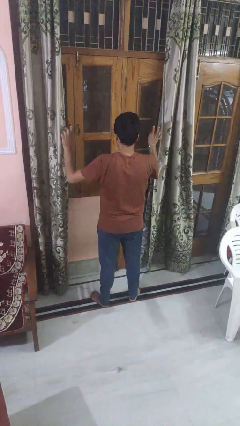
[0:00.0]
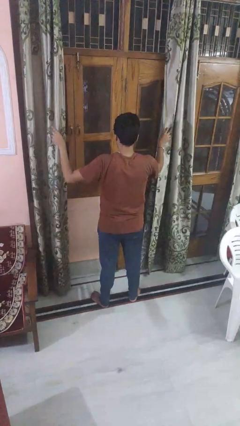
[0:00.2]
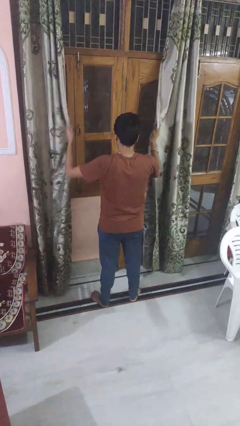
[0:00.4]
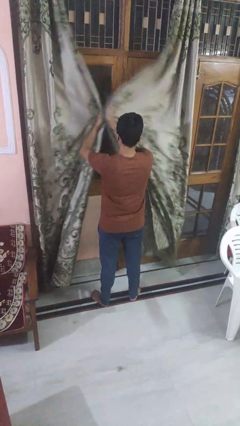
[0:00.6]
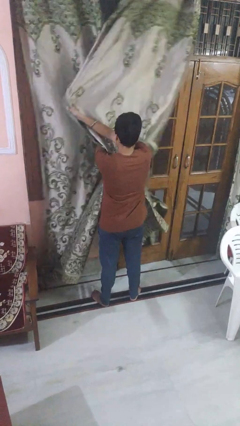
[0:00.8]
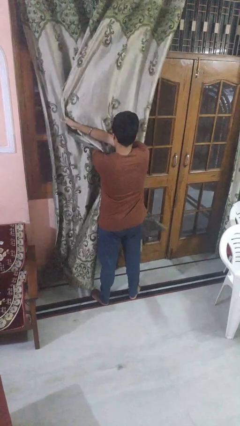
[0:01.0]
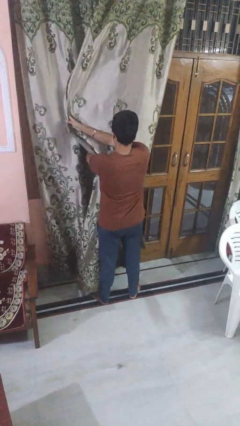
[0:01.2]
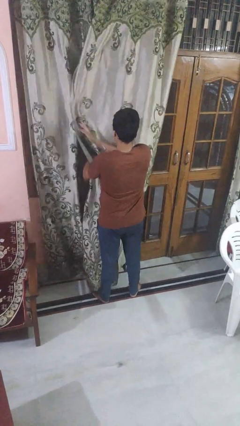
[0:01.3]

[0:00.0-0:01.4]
person closes curtains

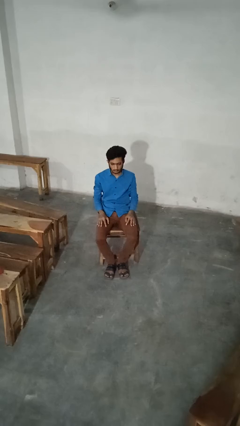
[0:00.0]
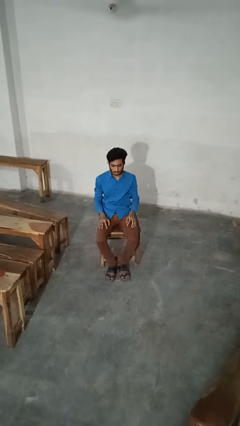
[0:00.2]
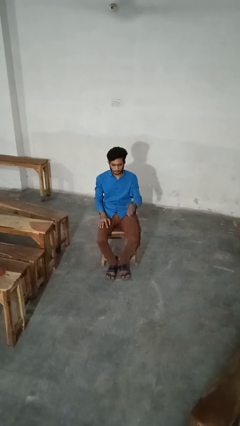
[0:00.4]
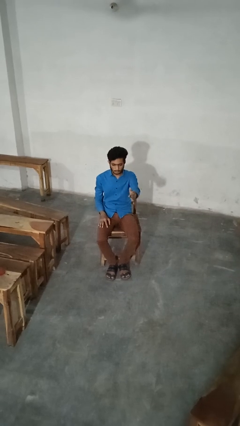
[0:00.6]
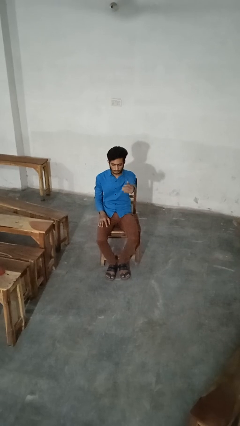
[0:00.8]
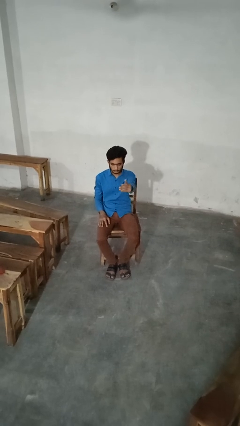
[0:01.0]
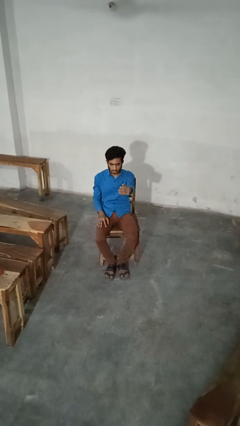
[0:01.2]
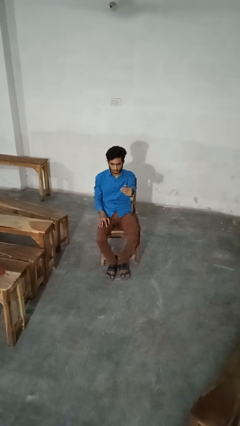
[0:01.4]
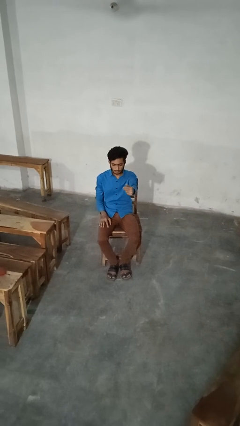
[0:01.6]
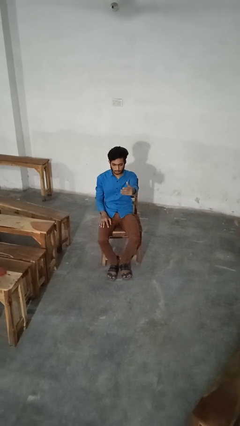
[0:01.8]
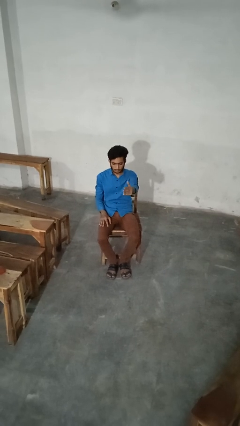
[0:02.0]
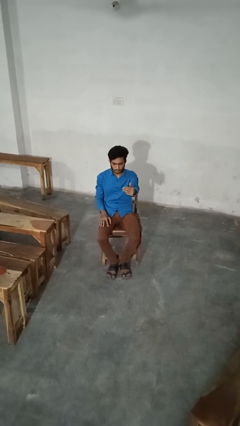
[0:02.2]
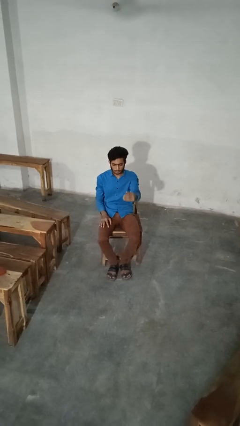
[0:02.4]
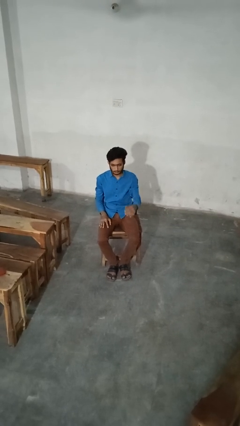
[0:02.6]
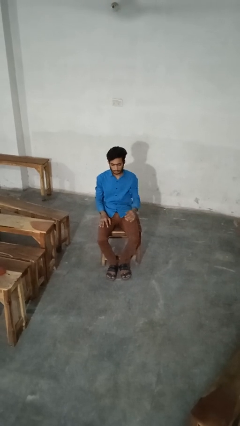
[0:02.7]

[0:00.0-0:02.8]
person gestures come here

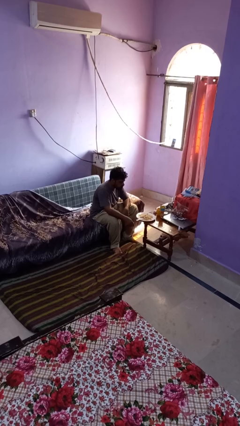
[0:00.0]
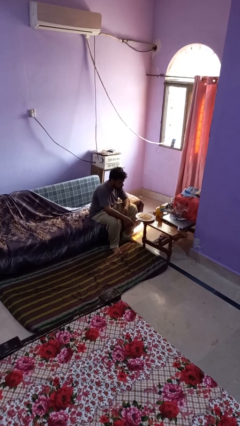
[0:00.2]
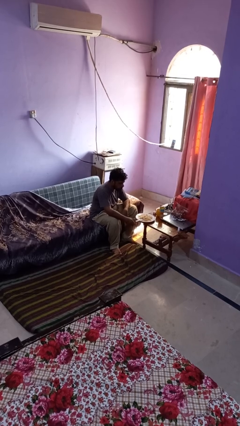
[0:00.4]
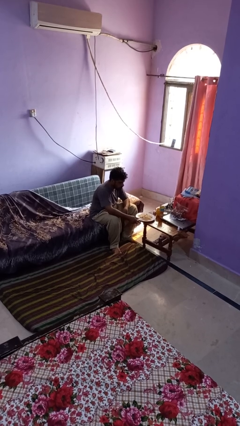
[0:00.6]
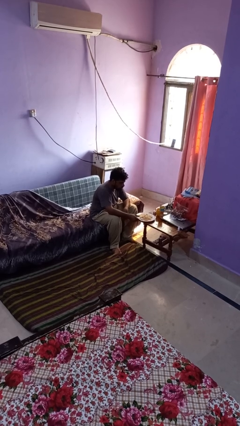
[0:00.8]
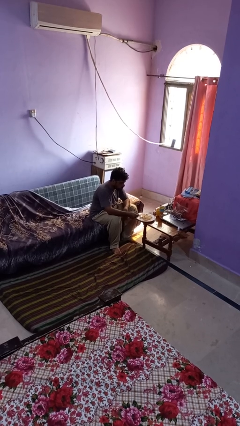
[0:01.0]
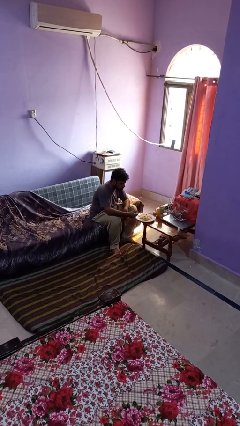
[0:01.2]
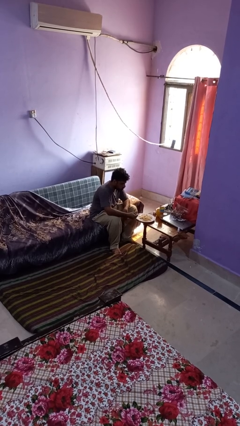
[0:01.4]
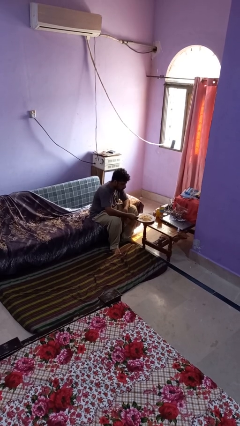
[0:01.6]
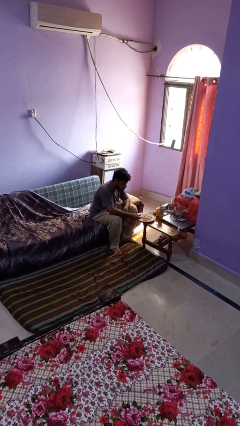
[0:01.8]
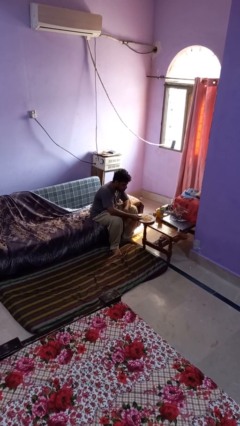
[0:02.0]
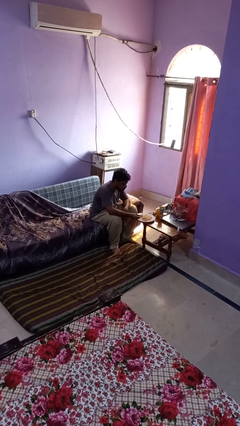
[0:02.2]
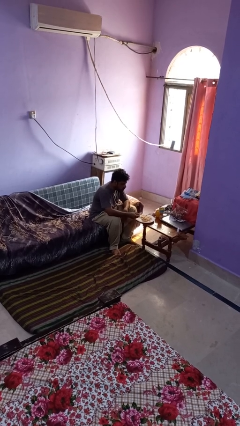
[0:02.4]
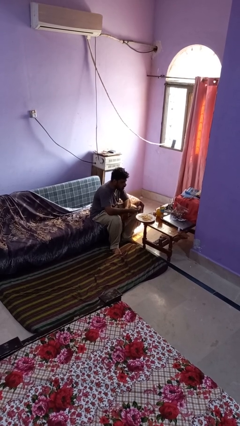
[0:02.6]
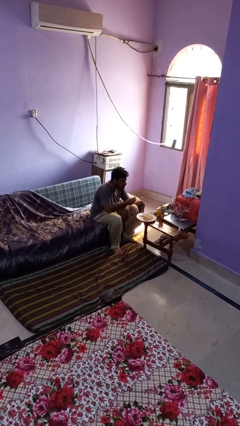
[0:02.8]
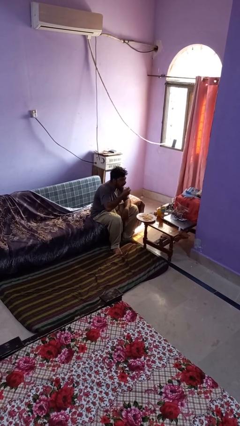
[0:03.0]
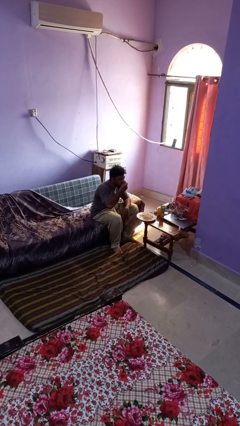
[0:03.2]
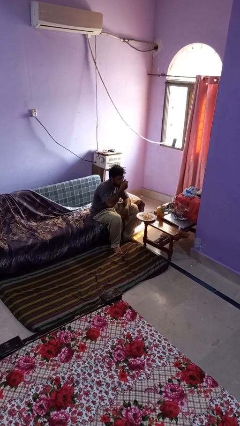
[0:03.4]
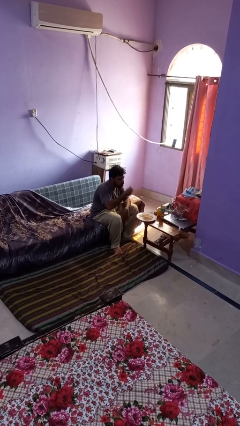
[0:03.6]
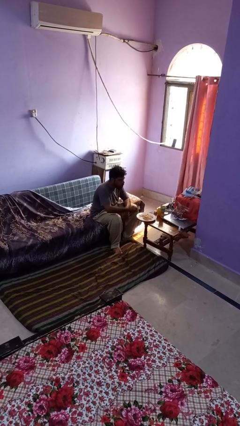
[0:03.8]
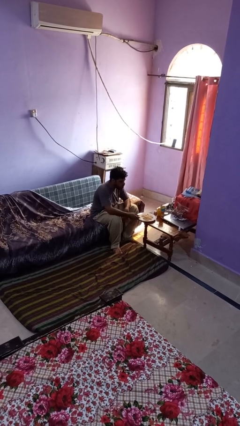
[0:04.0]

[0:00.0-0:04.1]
person eats with utensil

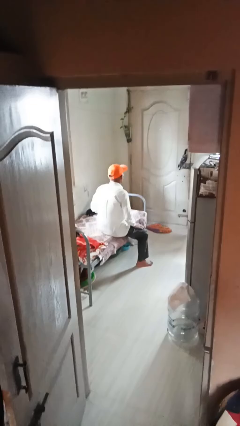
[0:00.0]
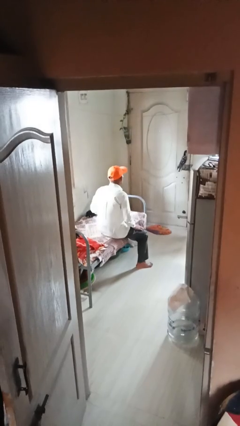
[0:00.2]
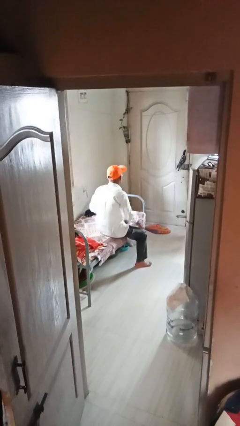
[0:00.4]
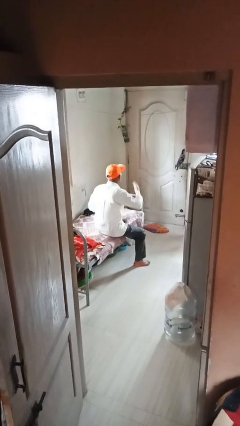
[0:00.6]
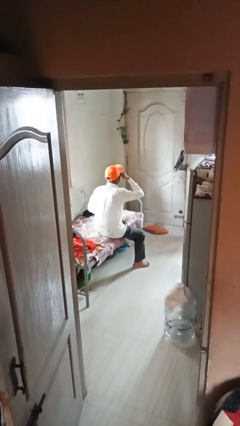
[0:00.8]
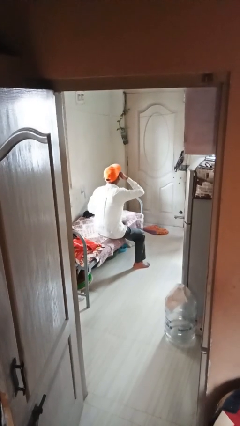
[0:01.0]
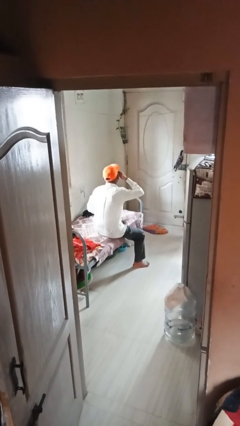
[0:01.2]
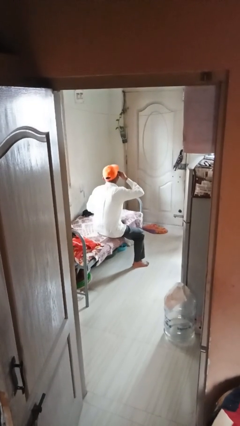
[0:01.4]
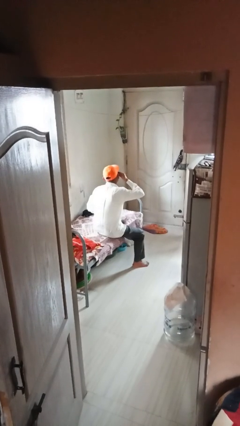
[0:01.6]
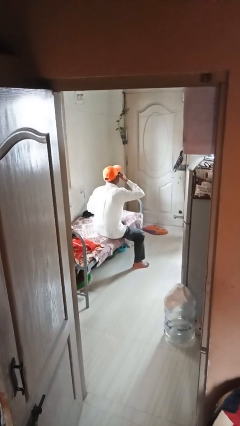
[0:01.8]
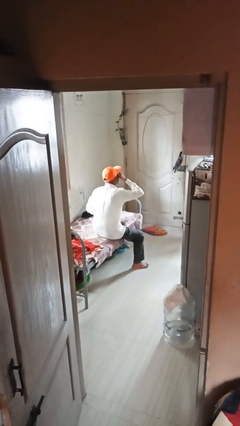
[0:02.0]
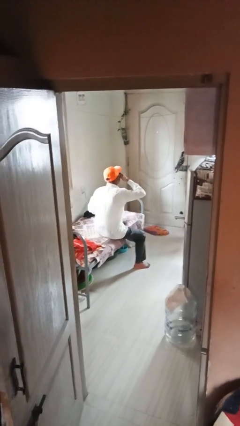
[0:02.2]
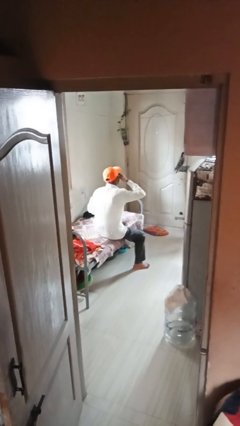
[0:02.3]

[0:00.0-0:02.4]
person rubs eyes

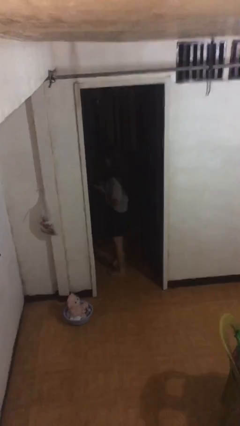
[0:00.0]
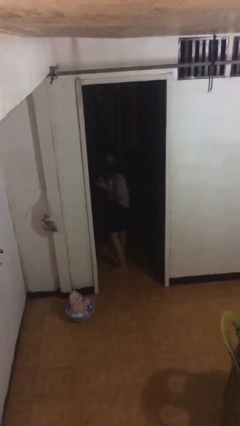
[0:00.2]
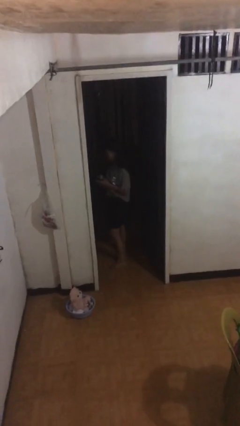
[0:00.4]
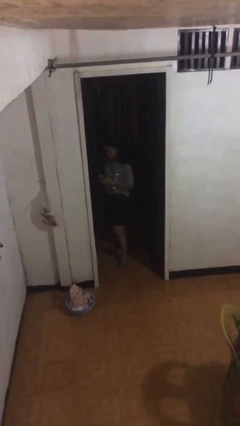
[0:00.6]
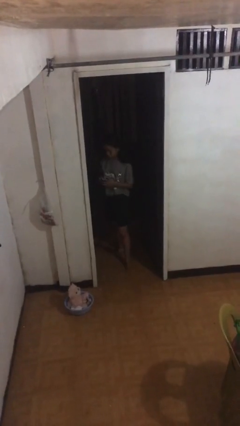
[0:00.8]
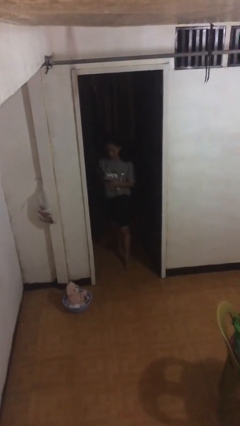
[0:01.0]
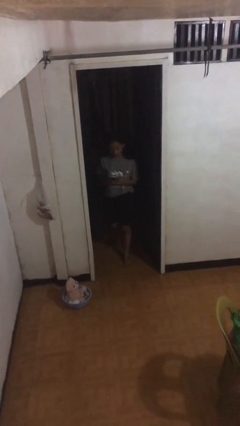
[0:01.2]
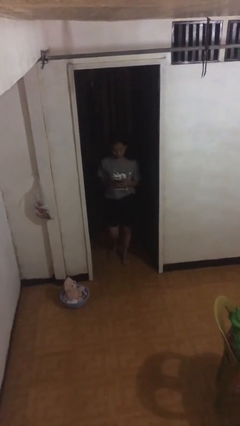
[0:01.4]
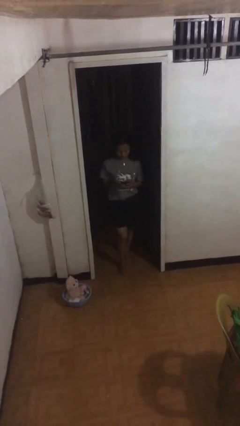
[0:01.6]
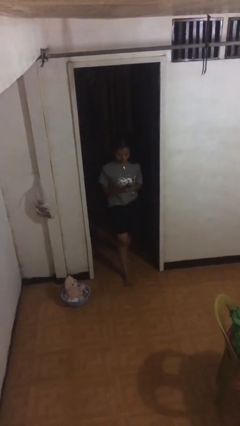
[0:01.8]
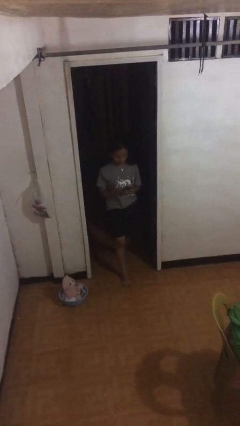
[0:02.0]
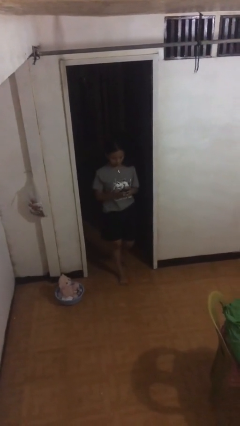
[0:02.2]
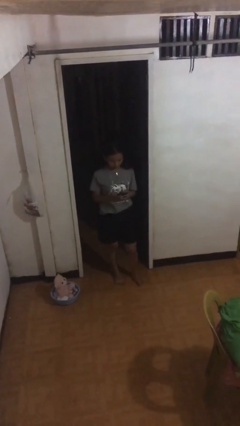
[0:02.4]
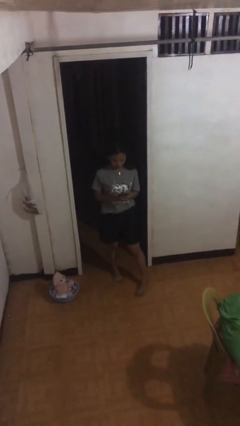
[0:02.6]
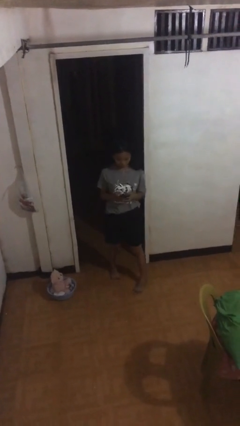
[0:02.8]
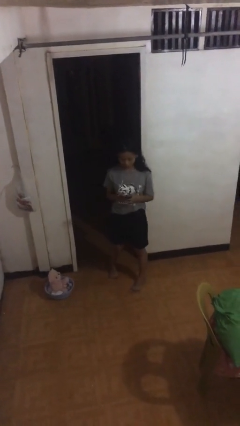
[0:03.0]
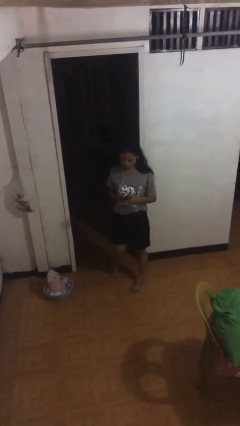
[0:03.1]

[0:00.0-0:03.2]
person enters scene through structure

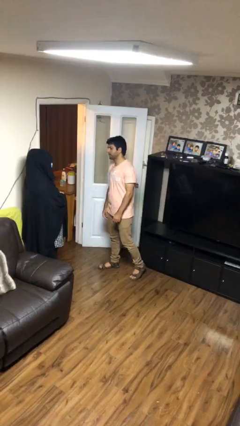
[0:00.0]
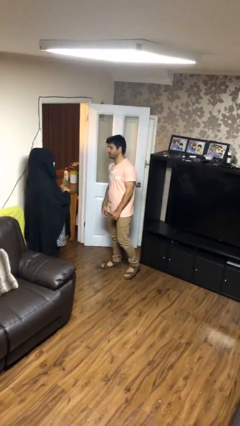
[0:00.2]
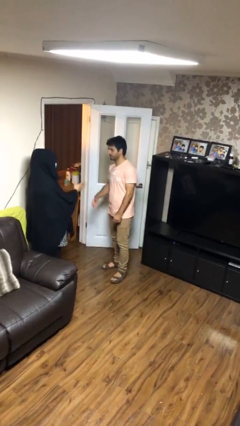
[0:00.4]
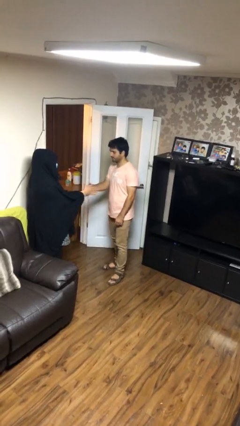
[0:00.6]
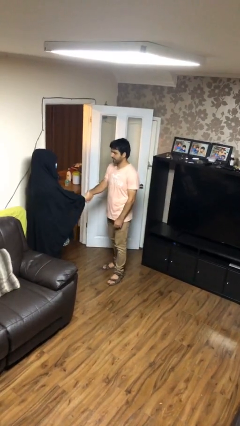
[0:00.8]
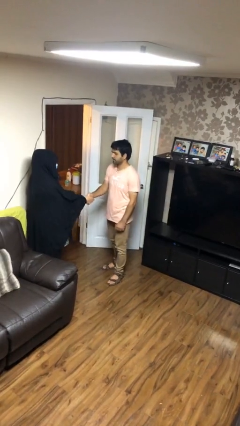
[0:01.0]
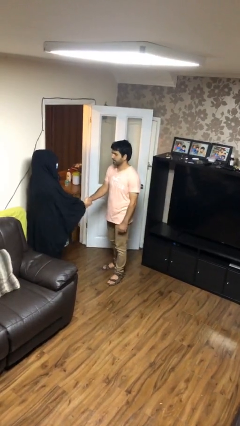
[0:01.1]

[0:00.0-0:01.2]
person shakes hand

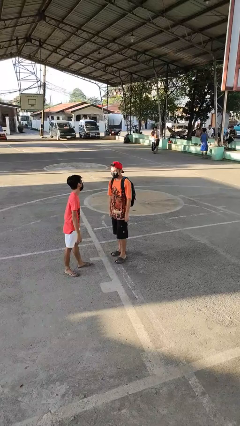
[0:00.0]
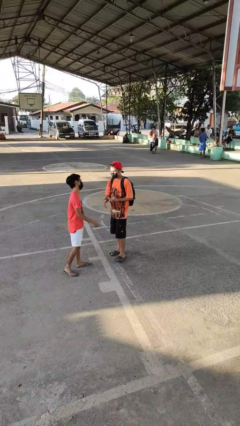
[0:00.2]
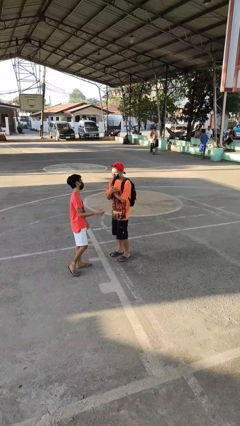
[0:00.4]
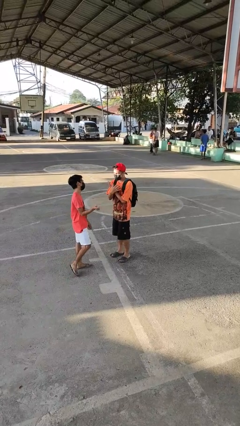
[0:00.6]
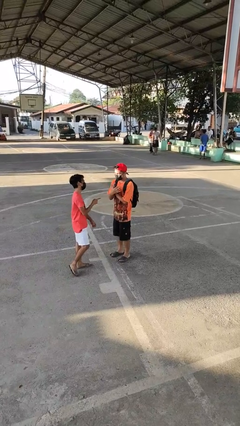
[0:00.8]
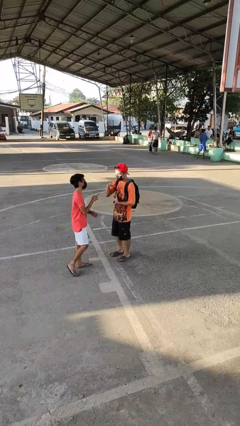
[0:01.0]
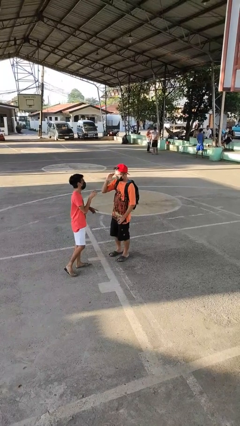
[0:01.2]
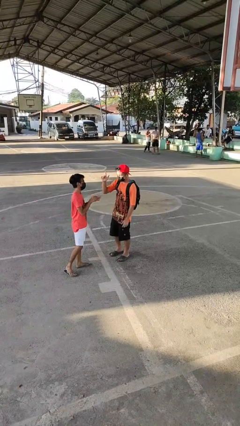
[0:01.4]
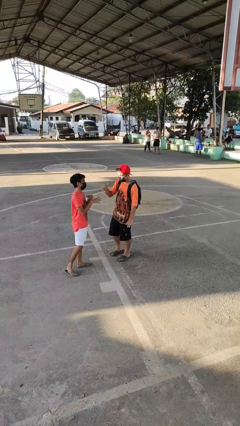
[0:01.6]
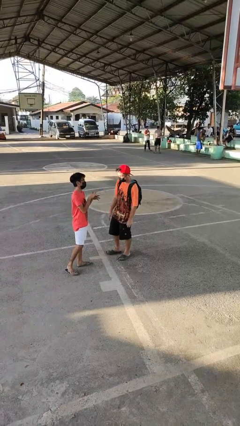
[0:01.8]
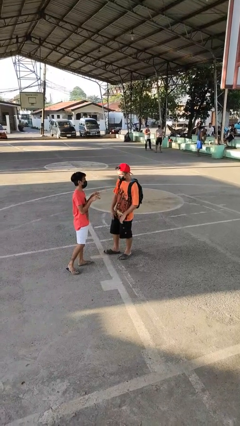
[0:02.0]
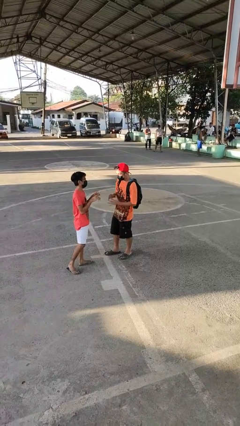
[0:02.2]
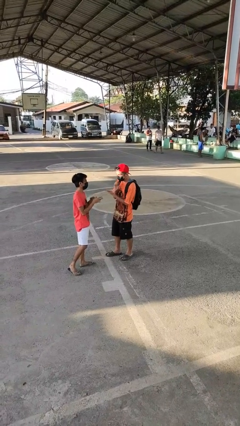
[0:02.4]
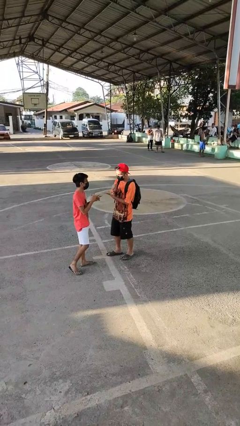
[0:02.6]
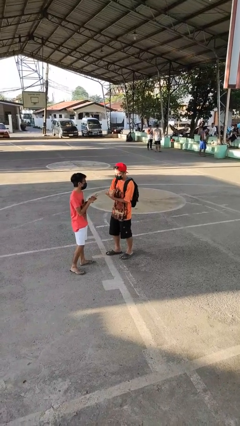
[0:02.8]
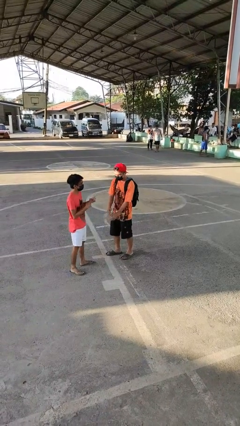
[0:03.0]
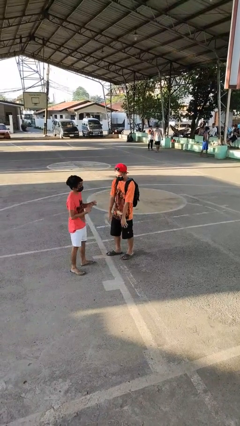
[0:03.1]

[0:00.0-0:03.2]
person talks to person
